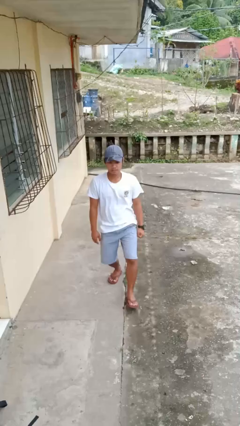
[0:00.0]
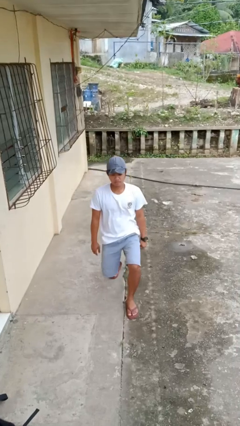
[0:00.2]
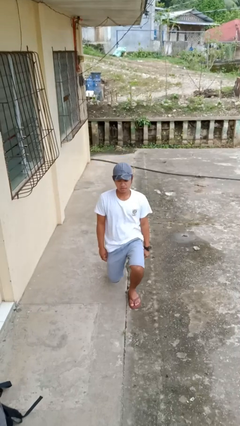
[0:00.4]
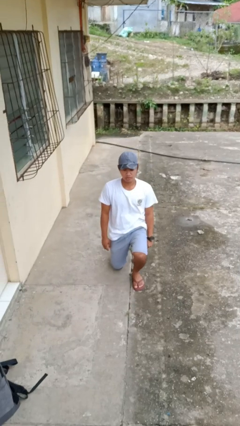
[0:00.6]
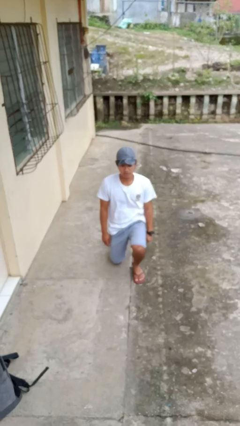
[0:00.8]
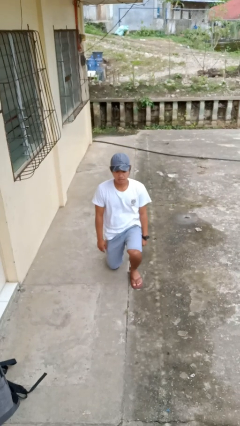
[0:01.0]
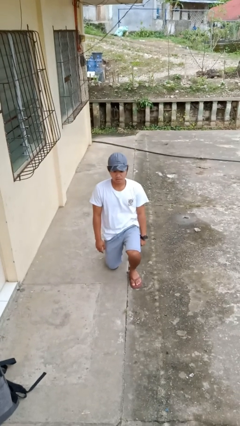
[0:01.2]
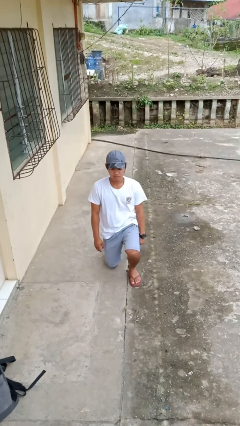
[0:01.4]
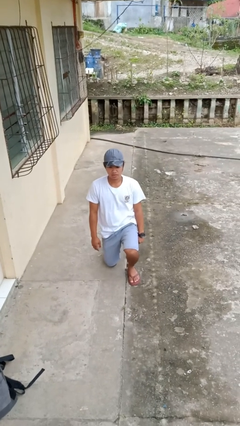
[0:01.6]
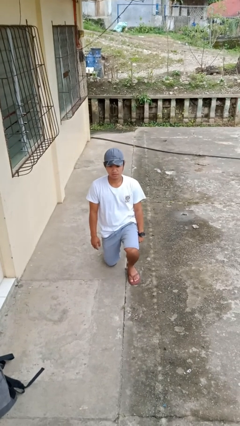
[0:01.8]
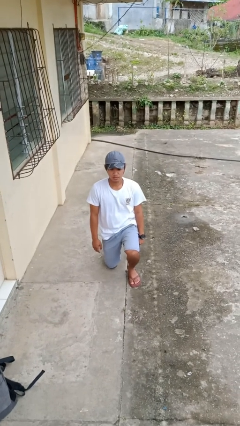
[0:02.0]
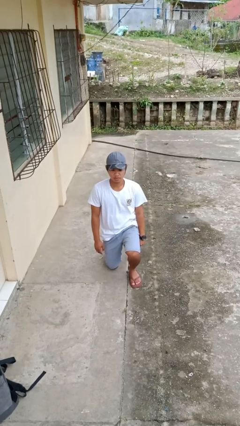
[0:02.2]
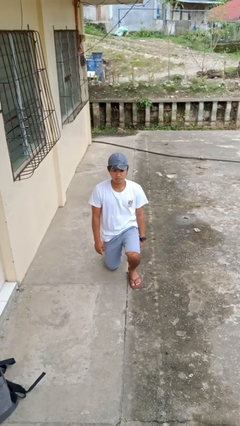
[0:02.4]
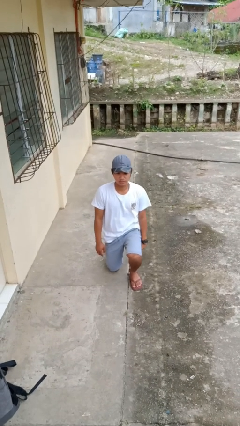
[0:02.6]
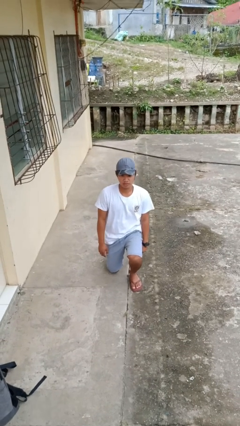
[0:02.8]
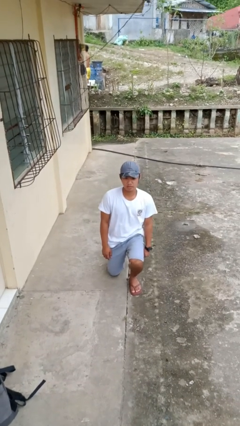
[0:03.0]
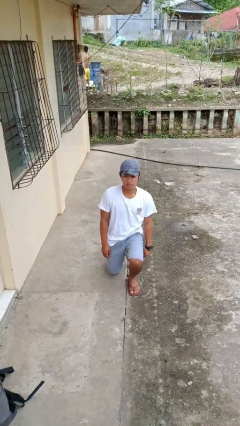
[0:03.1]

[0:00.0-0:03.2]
person kneels

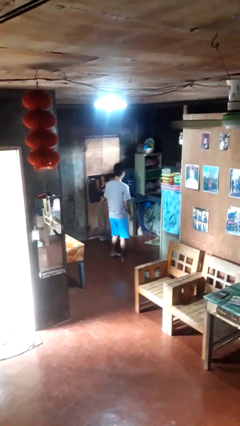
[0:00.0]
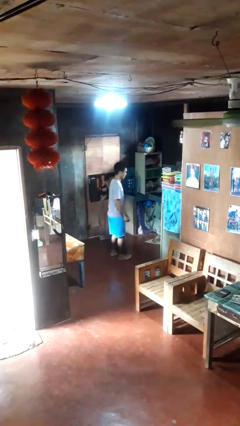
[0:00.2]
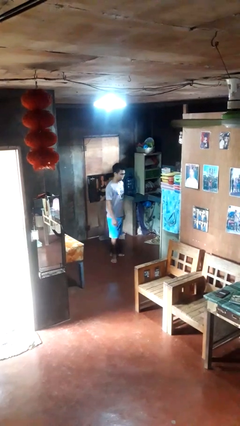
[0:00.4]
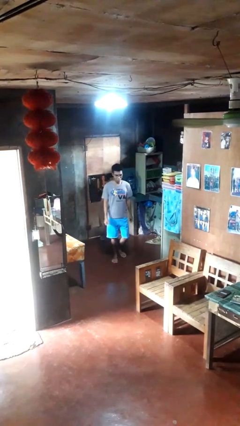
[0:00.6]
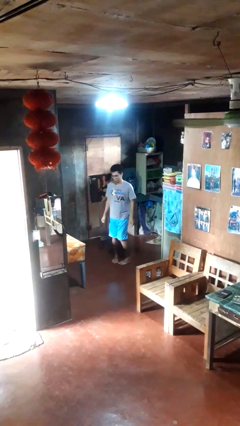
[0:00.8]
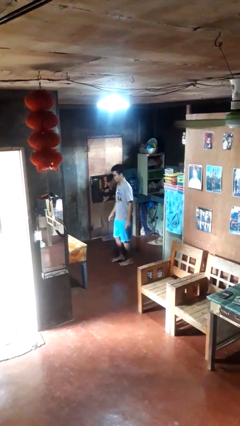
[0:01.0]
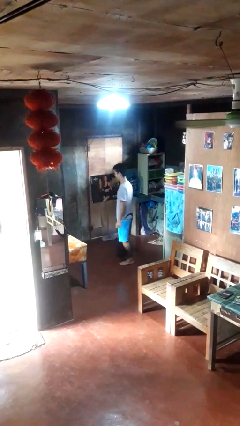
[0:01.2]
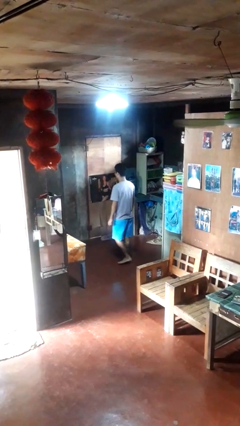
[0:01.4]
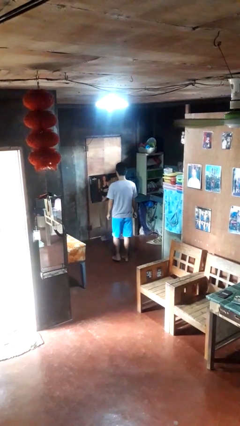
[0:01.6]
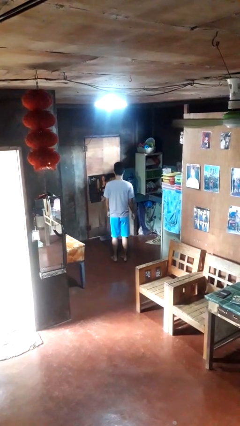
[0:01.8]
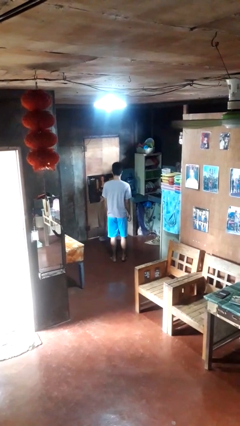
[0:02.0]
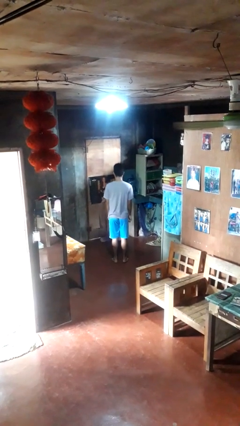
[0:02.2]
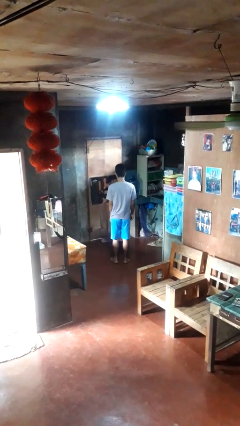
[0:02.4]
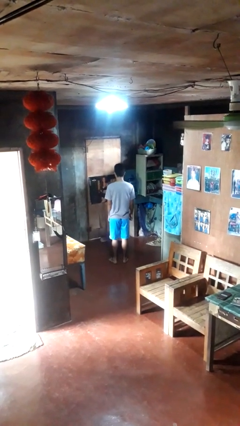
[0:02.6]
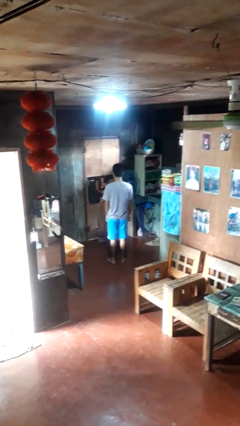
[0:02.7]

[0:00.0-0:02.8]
person twirls

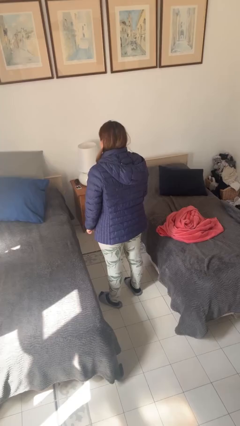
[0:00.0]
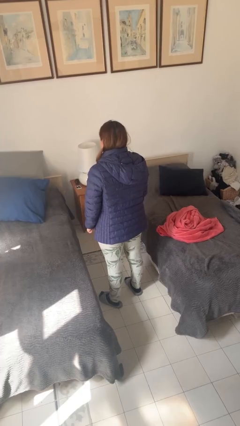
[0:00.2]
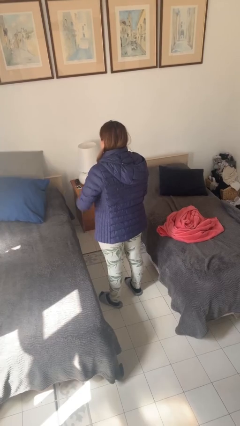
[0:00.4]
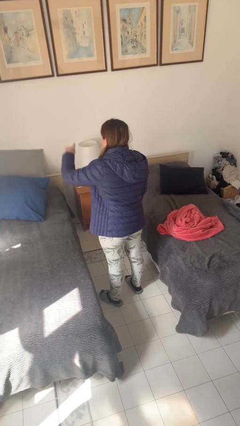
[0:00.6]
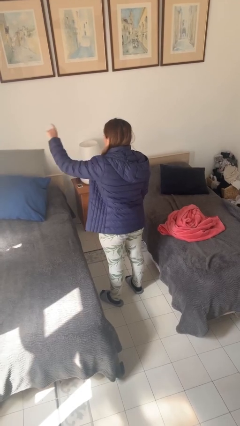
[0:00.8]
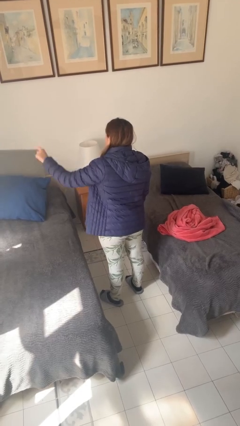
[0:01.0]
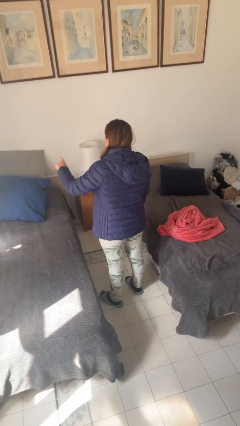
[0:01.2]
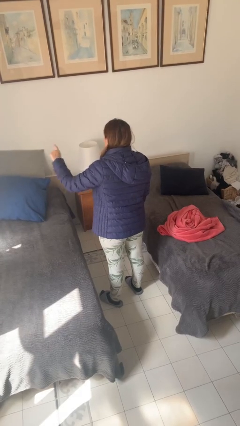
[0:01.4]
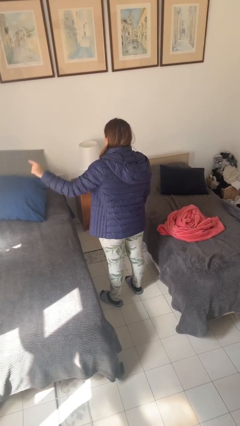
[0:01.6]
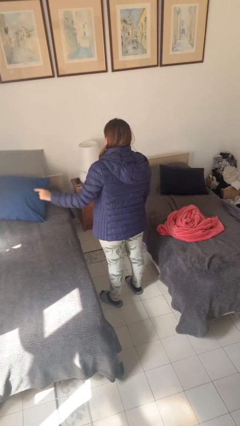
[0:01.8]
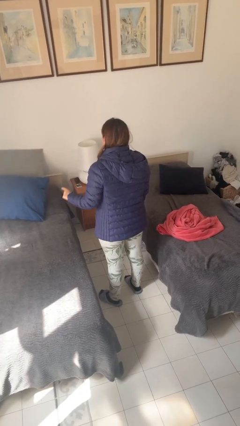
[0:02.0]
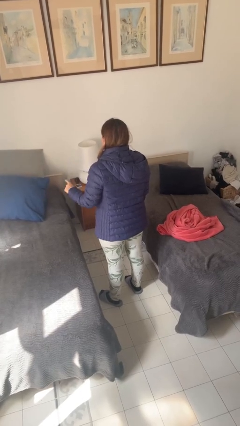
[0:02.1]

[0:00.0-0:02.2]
person gestures number three

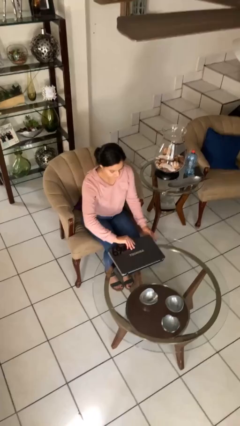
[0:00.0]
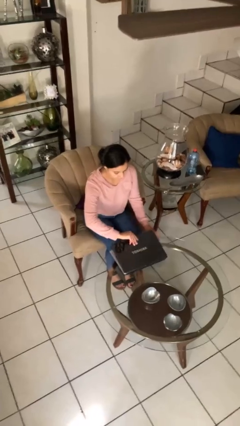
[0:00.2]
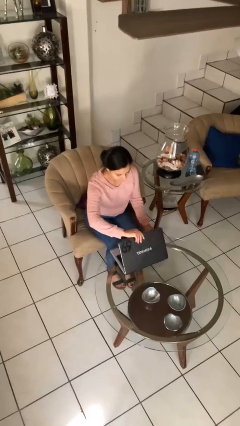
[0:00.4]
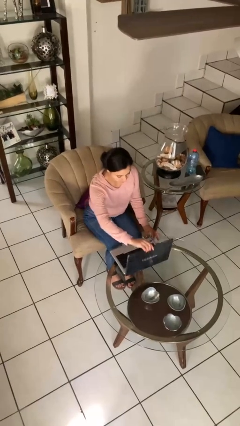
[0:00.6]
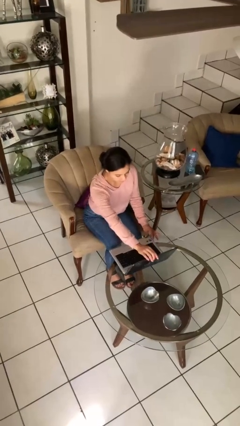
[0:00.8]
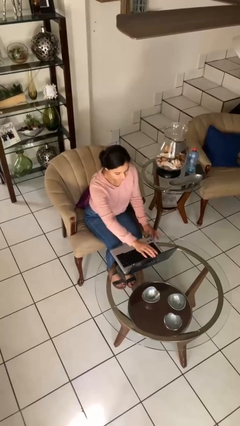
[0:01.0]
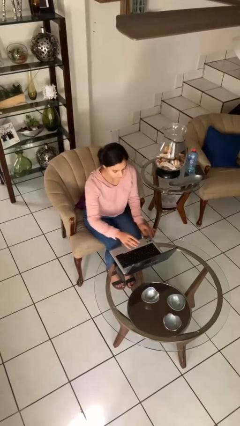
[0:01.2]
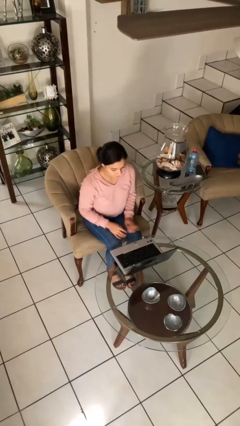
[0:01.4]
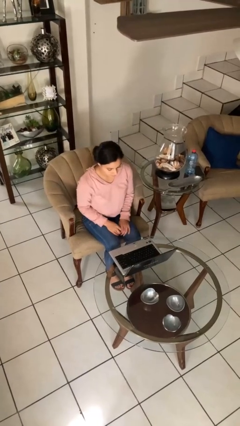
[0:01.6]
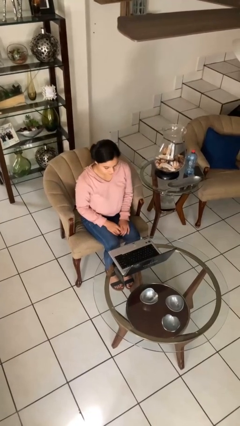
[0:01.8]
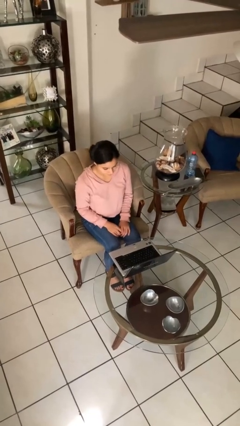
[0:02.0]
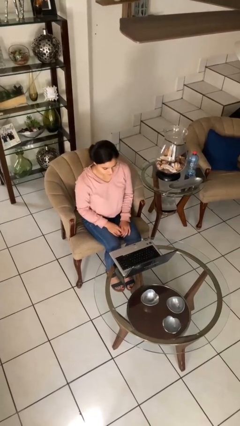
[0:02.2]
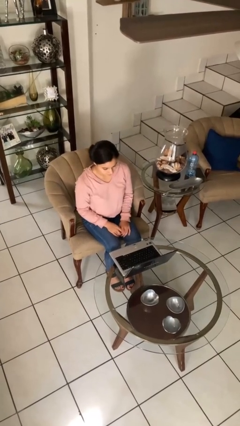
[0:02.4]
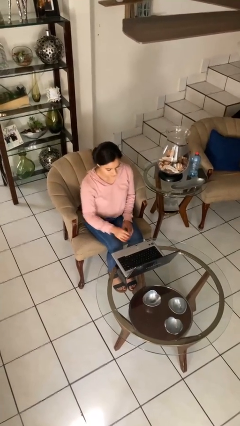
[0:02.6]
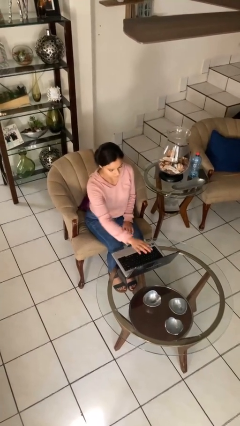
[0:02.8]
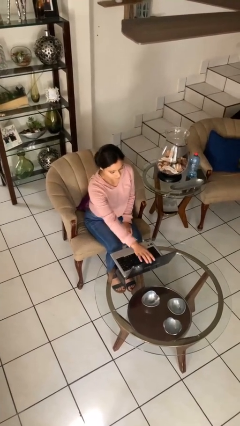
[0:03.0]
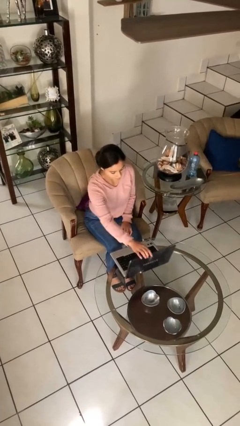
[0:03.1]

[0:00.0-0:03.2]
person opens laptop

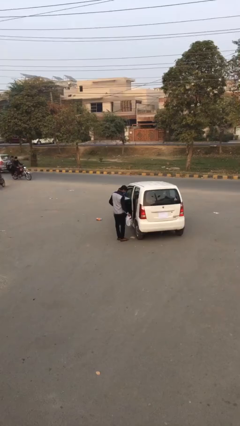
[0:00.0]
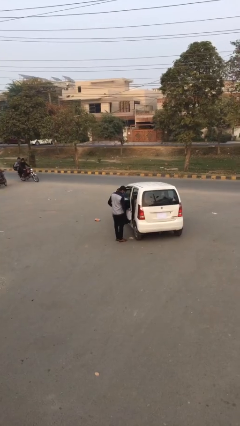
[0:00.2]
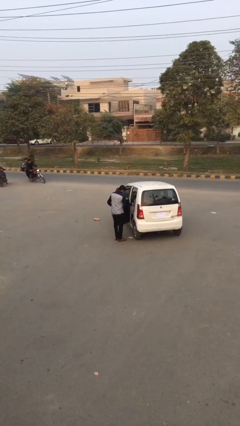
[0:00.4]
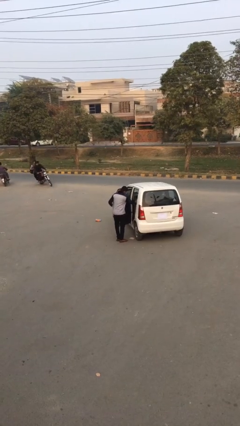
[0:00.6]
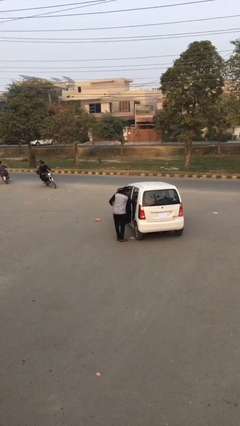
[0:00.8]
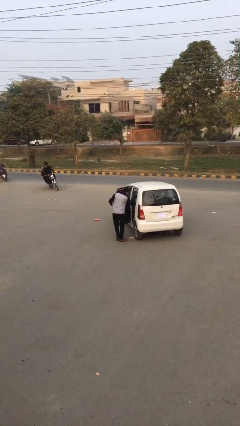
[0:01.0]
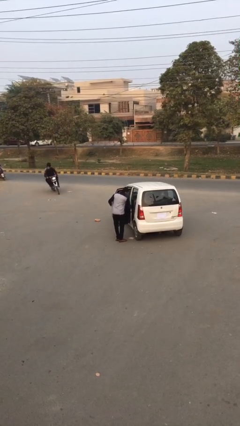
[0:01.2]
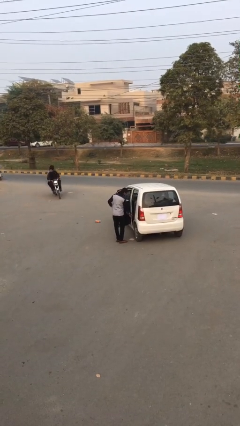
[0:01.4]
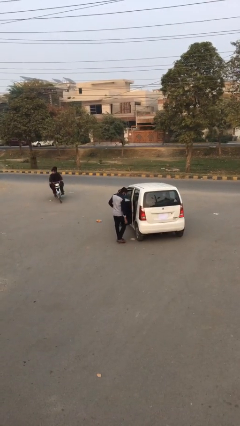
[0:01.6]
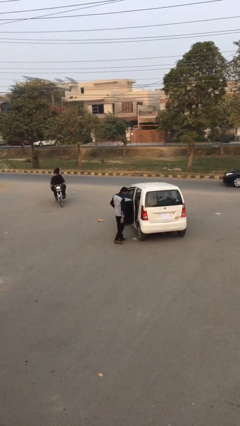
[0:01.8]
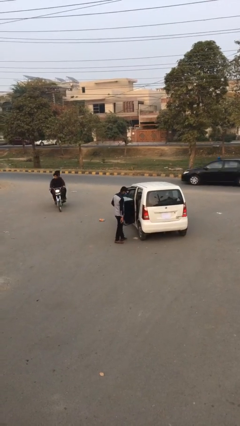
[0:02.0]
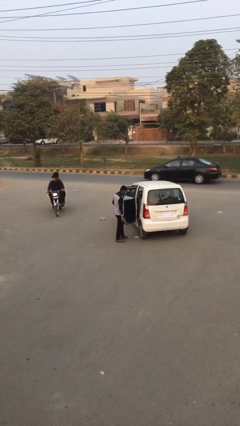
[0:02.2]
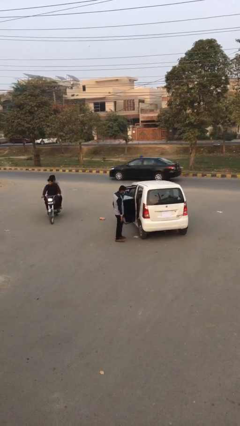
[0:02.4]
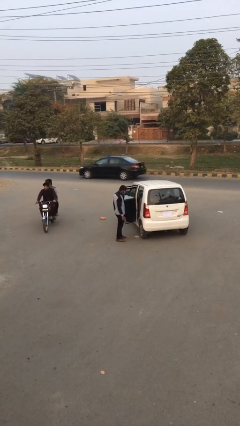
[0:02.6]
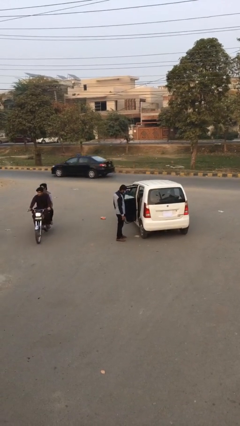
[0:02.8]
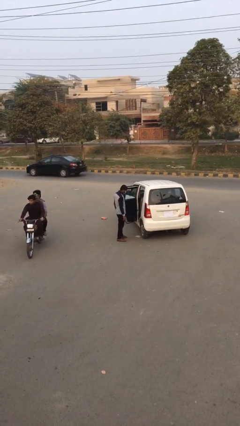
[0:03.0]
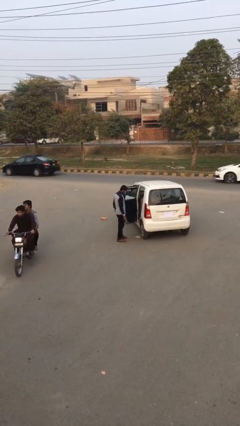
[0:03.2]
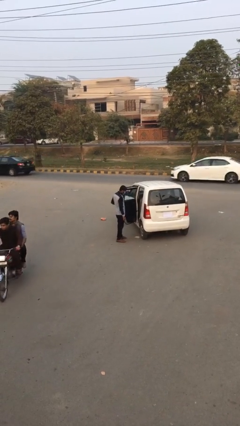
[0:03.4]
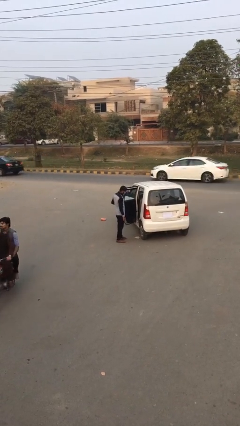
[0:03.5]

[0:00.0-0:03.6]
person loads car

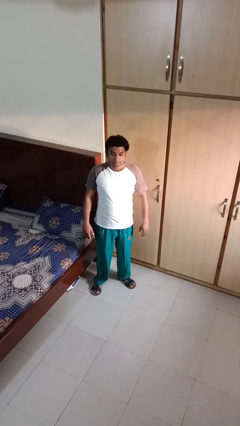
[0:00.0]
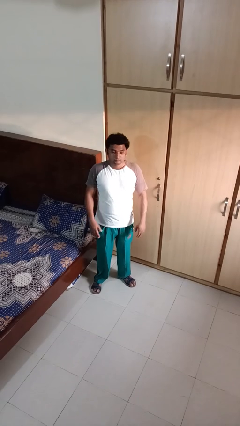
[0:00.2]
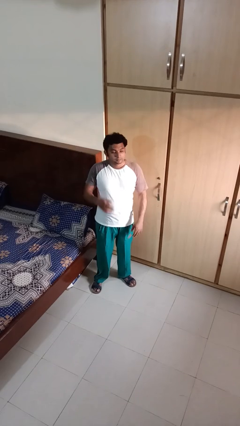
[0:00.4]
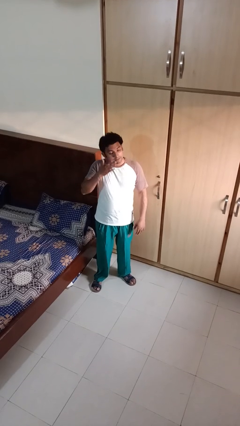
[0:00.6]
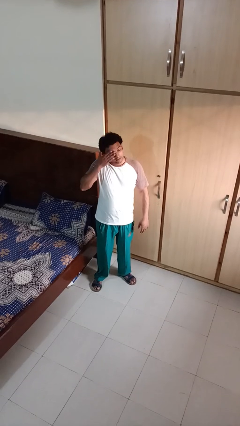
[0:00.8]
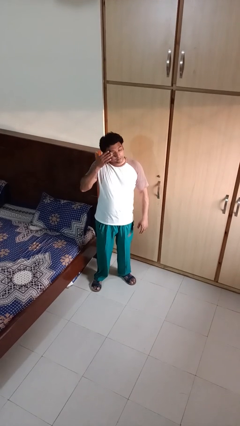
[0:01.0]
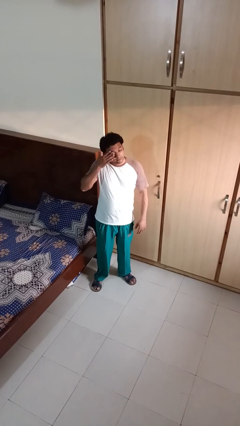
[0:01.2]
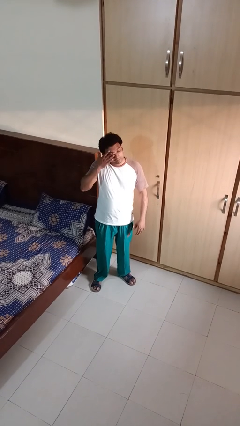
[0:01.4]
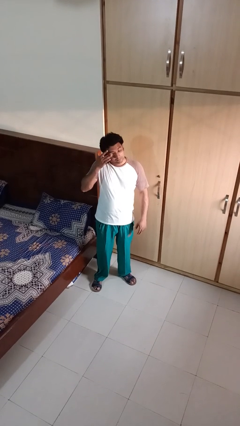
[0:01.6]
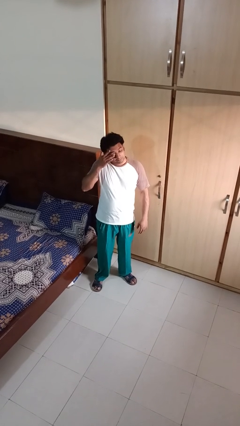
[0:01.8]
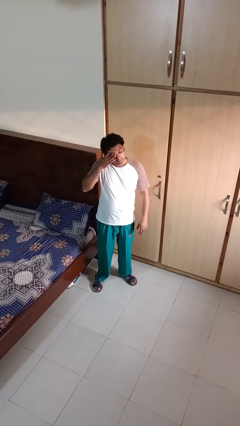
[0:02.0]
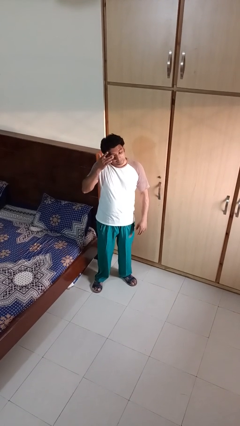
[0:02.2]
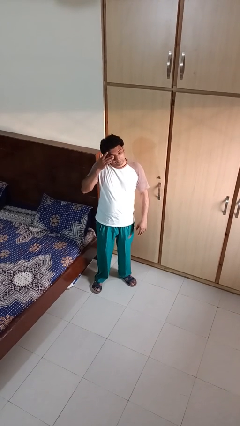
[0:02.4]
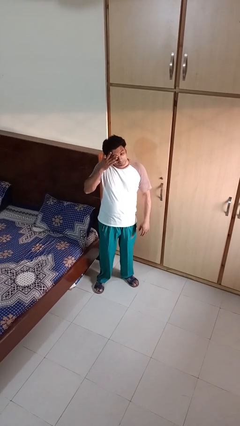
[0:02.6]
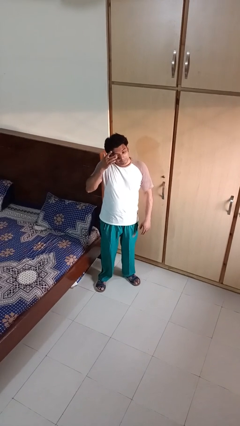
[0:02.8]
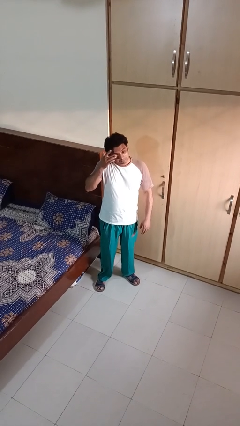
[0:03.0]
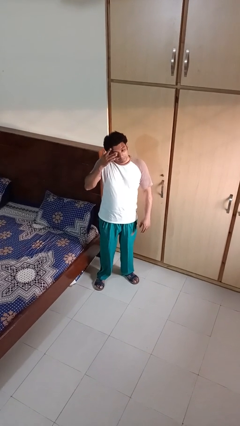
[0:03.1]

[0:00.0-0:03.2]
person rubs eyes
